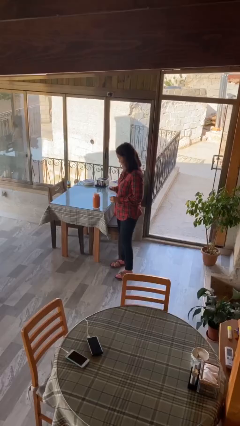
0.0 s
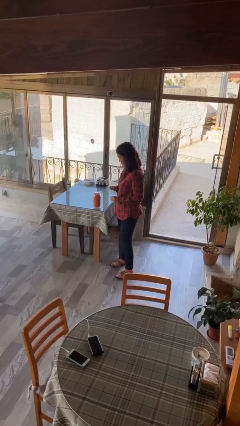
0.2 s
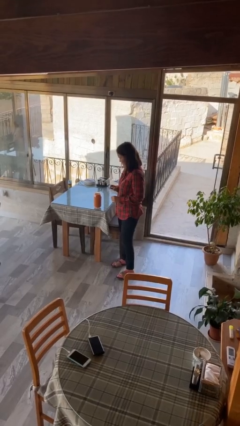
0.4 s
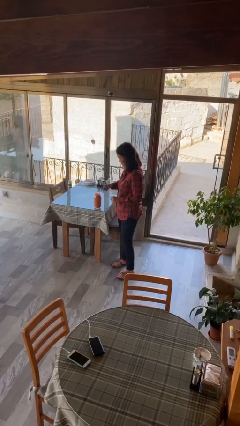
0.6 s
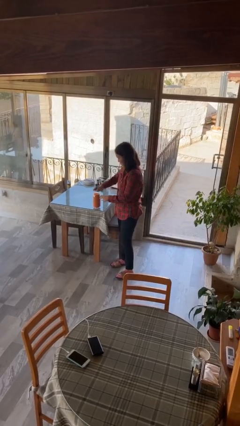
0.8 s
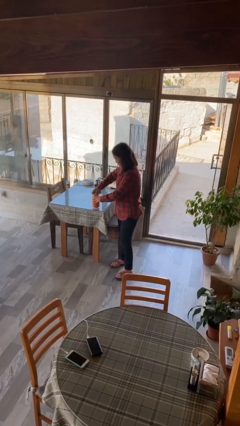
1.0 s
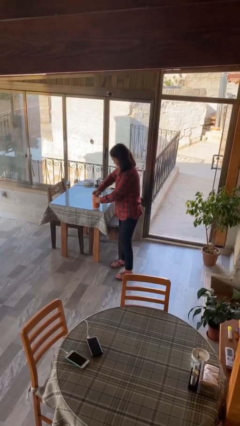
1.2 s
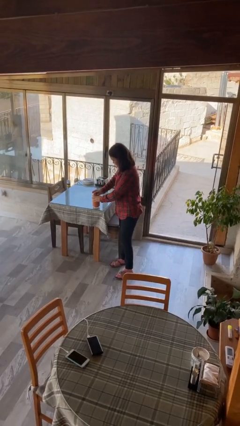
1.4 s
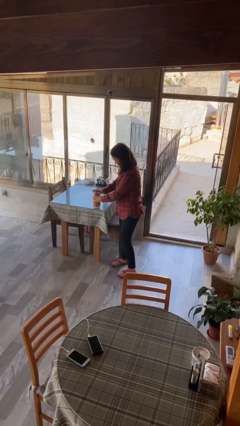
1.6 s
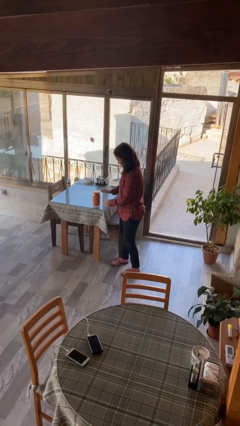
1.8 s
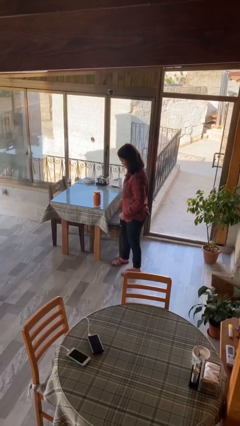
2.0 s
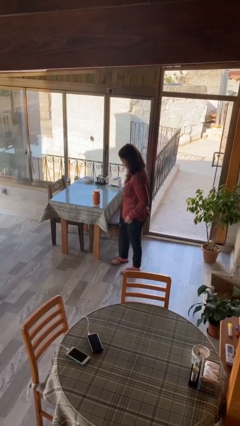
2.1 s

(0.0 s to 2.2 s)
person closes jar

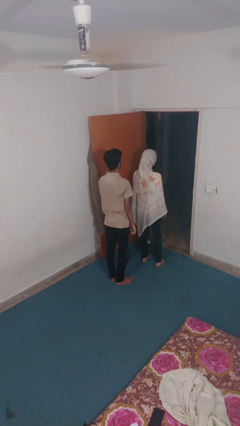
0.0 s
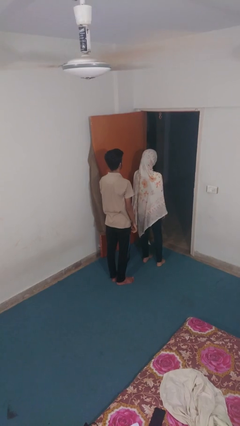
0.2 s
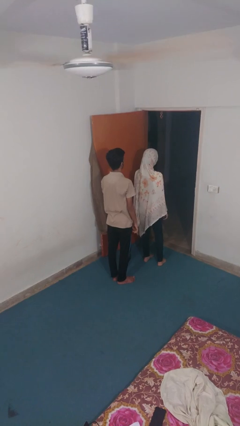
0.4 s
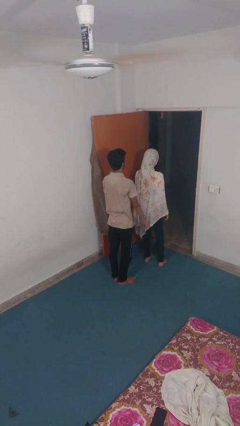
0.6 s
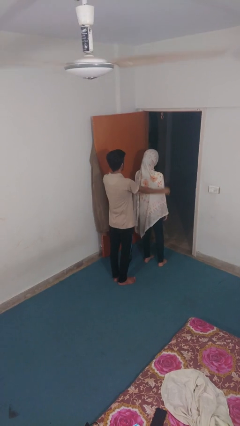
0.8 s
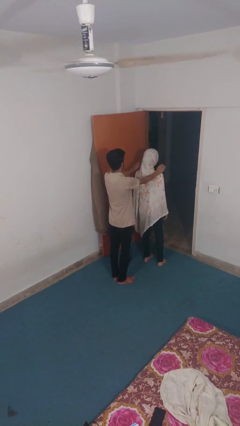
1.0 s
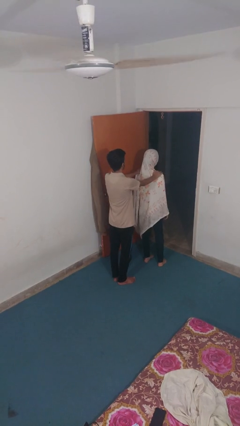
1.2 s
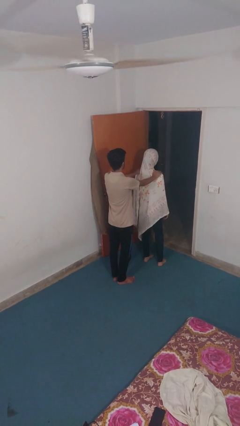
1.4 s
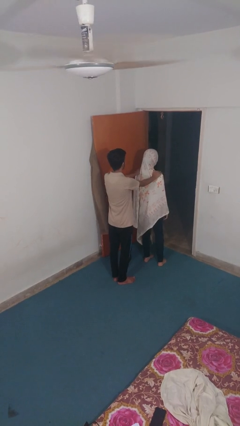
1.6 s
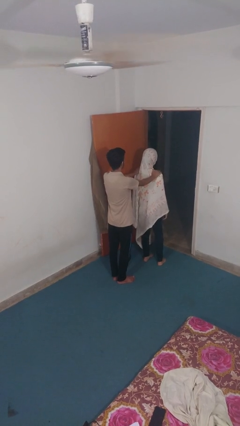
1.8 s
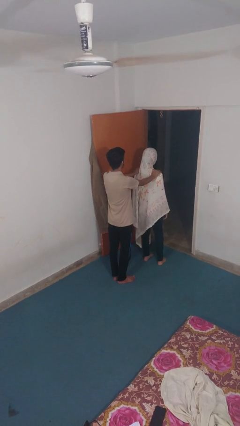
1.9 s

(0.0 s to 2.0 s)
person grabs person by shoulder

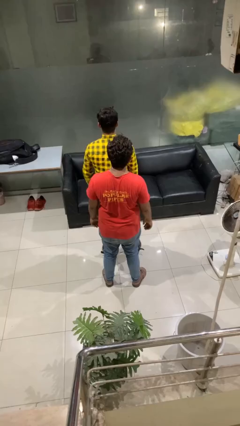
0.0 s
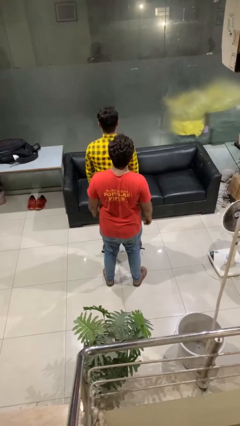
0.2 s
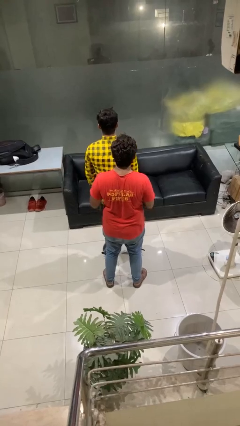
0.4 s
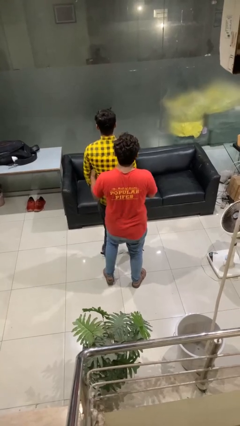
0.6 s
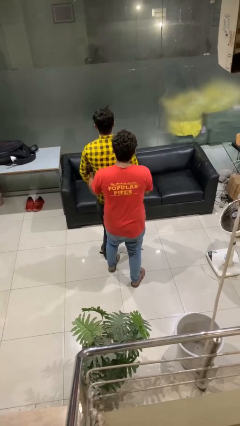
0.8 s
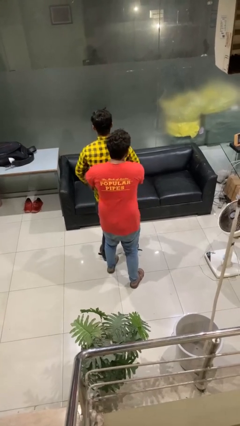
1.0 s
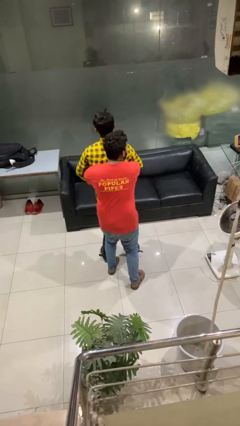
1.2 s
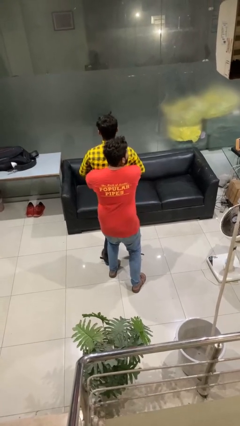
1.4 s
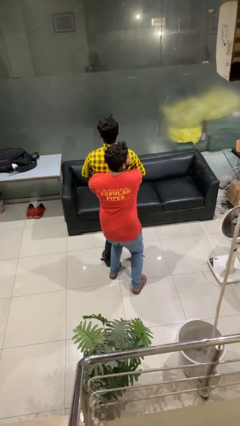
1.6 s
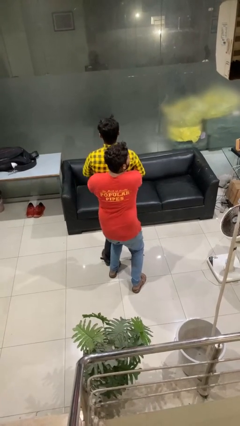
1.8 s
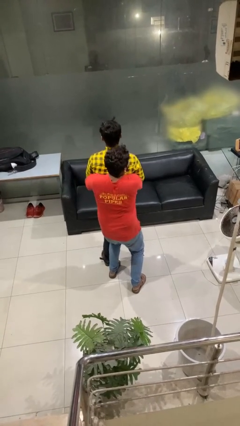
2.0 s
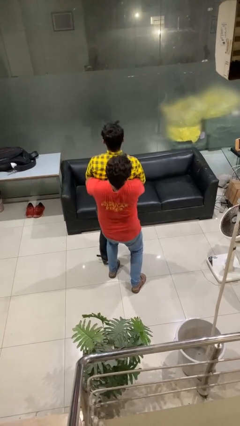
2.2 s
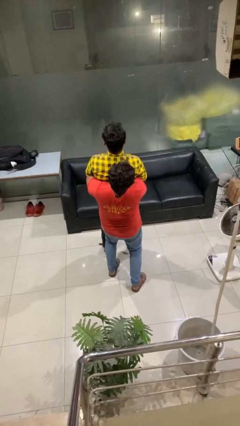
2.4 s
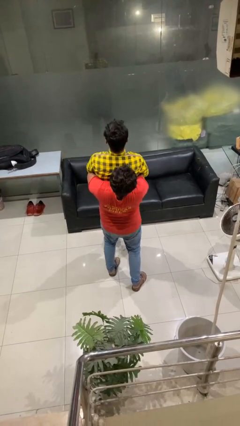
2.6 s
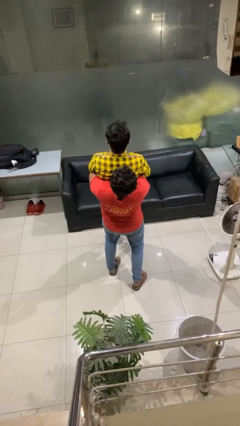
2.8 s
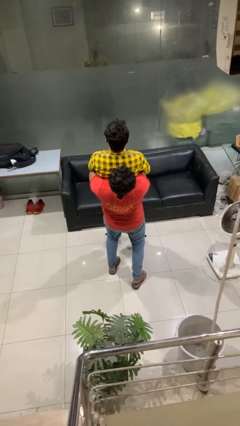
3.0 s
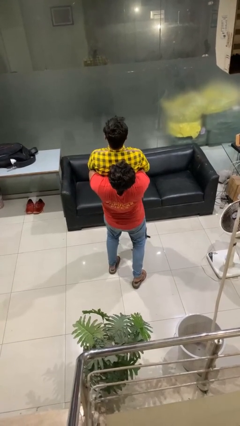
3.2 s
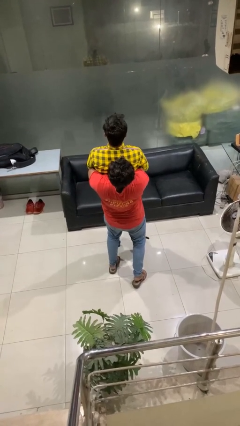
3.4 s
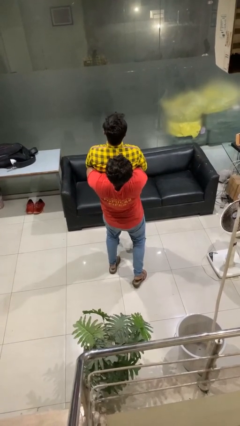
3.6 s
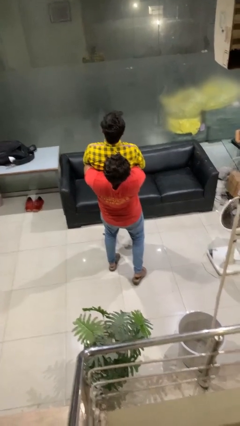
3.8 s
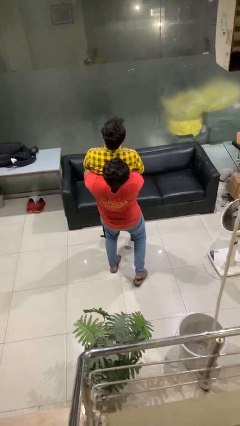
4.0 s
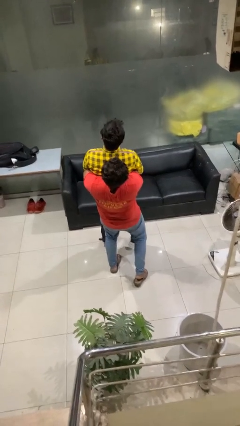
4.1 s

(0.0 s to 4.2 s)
person picks up person

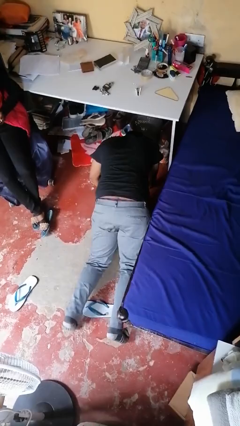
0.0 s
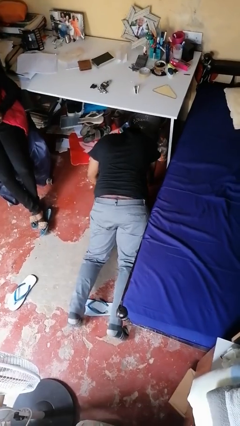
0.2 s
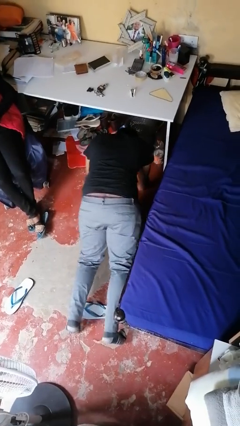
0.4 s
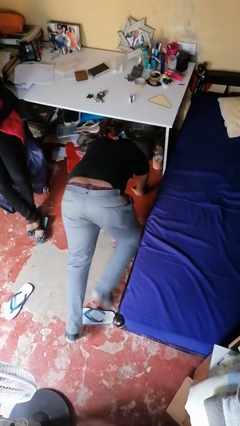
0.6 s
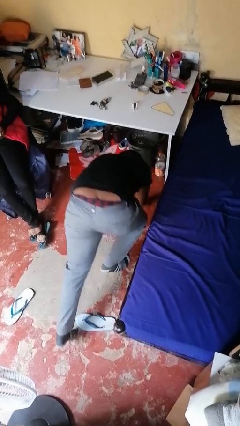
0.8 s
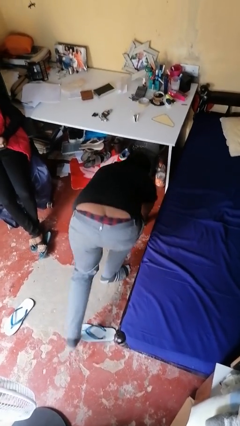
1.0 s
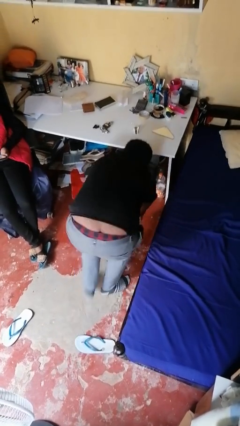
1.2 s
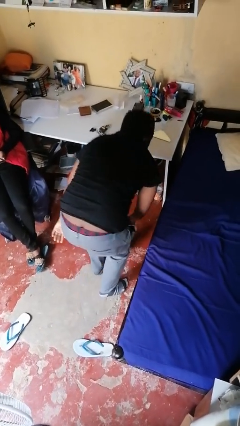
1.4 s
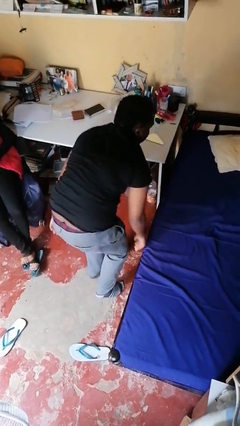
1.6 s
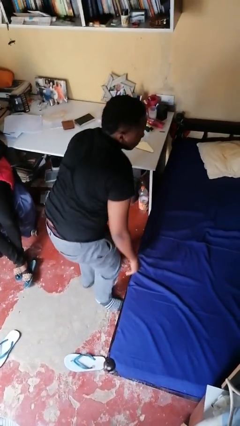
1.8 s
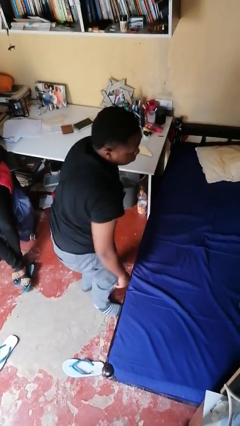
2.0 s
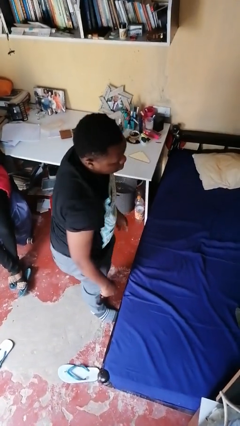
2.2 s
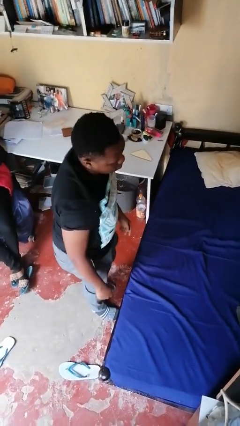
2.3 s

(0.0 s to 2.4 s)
person stands up from floor

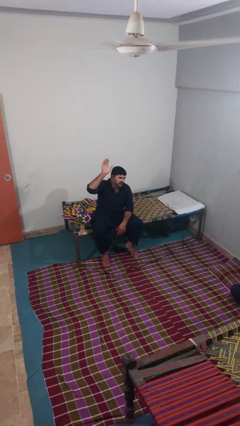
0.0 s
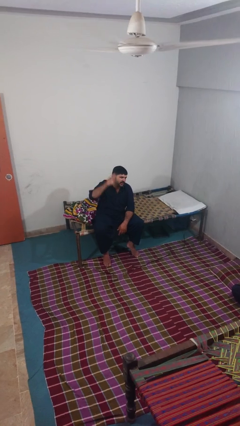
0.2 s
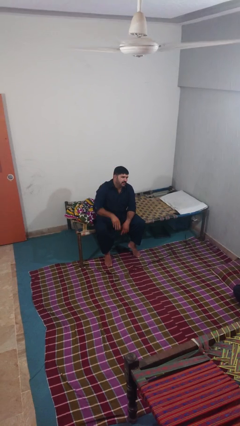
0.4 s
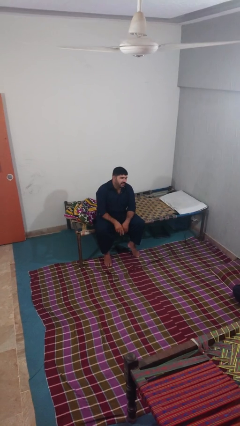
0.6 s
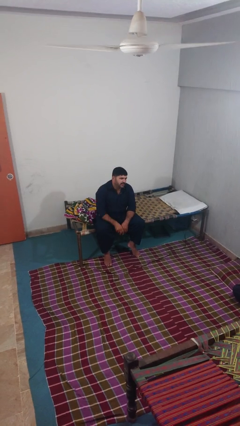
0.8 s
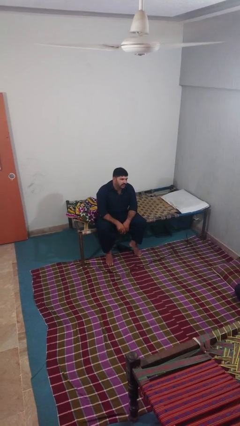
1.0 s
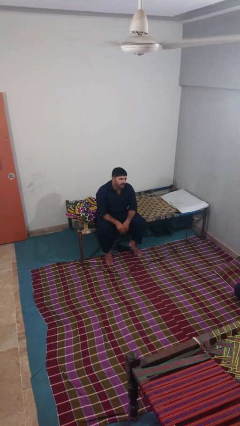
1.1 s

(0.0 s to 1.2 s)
person gestures swipe down

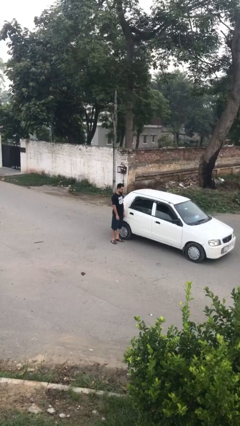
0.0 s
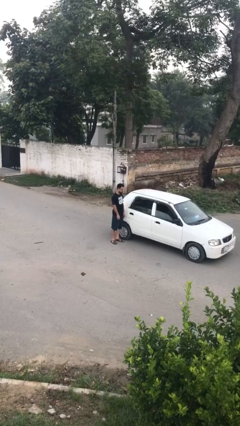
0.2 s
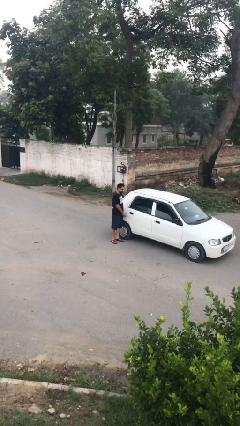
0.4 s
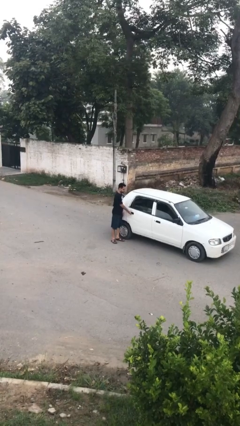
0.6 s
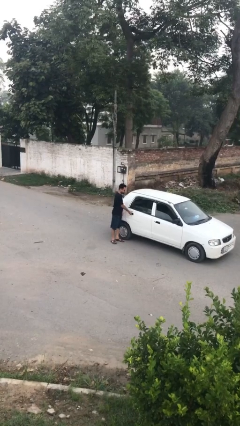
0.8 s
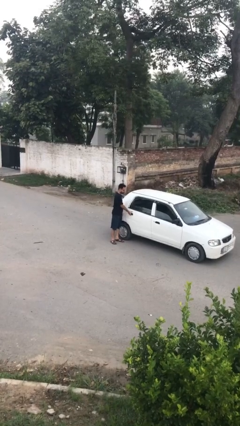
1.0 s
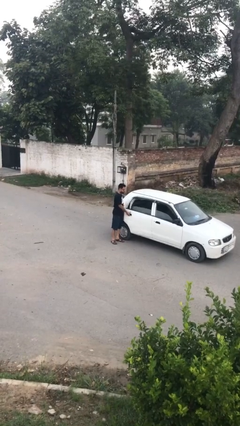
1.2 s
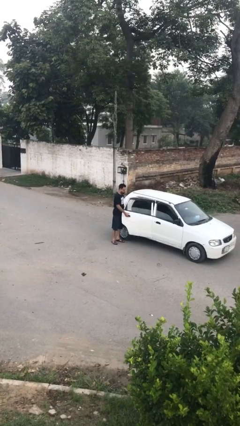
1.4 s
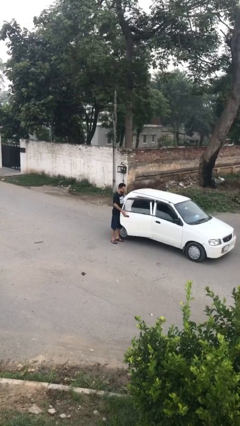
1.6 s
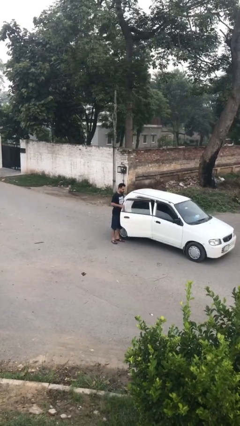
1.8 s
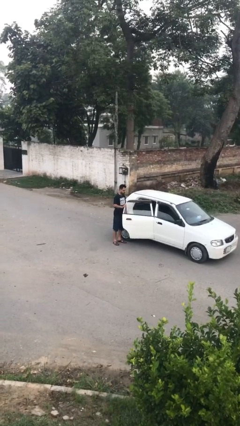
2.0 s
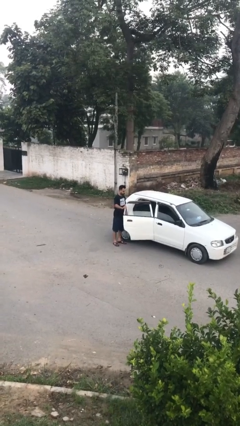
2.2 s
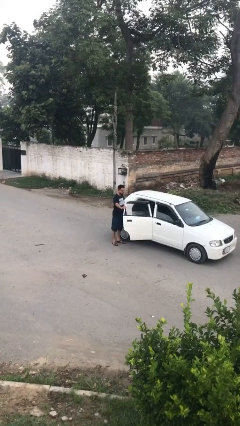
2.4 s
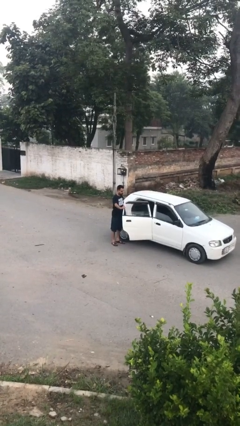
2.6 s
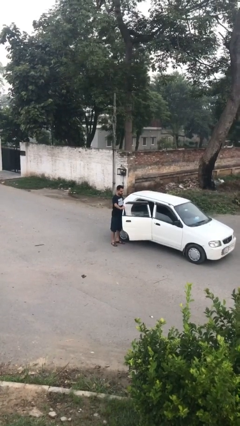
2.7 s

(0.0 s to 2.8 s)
person opens car door

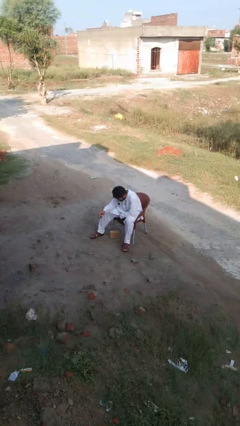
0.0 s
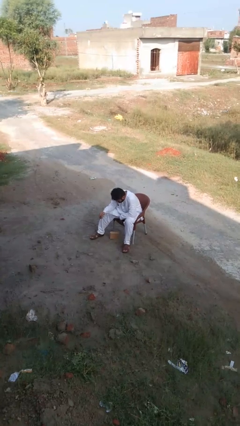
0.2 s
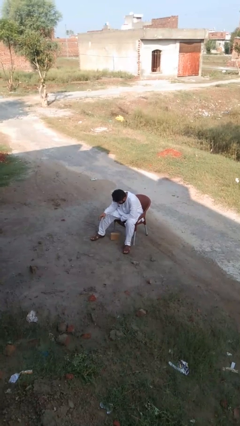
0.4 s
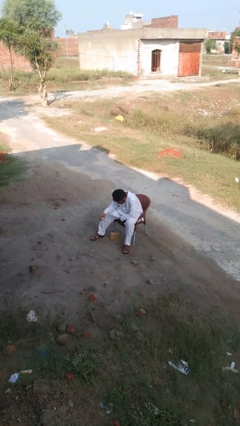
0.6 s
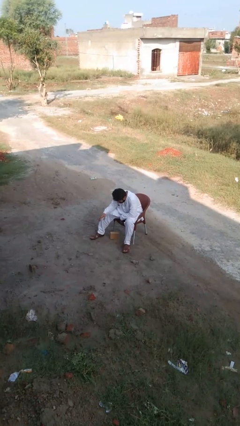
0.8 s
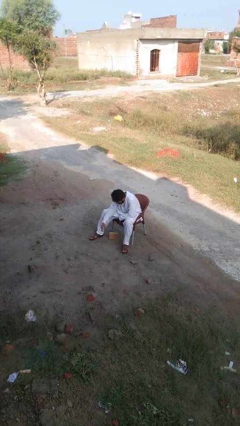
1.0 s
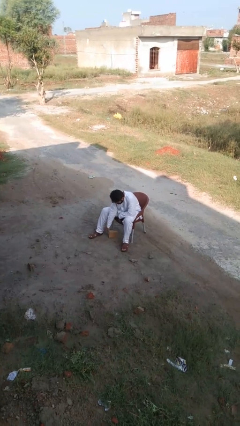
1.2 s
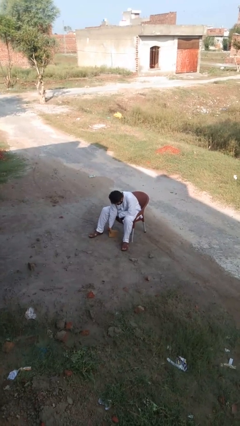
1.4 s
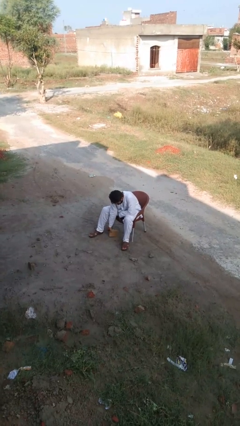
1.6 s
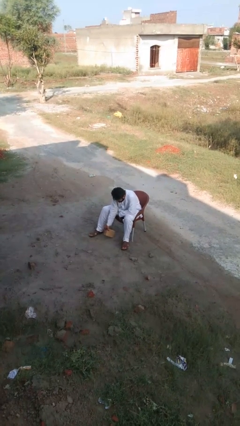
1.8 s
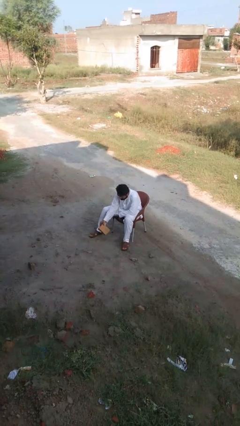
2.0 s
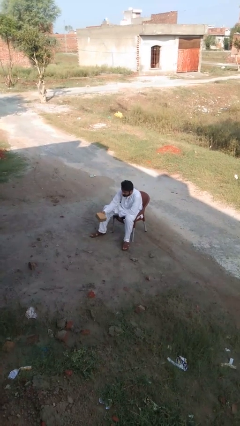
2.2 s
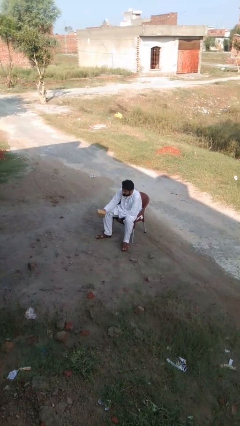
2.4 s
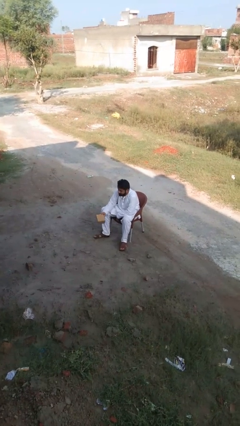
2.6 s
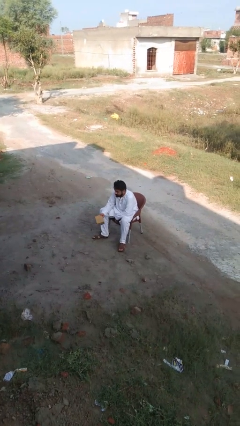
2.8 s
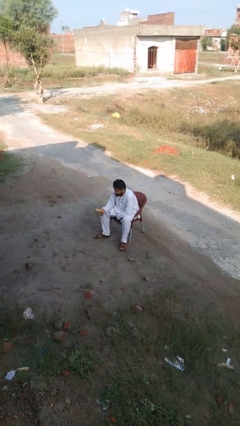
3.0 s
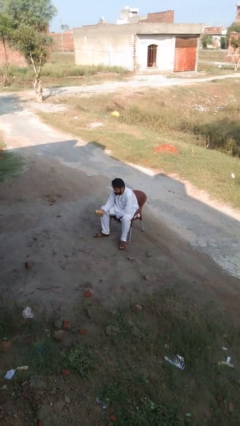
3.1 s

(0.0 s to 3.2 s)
person picks up object from floor
